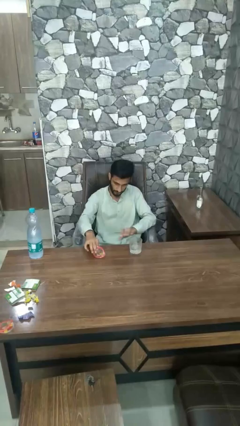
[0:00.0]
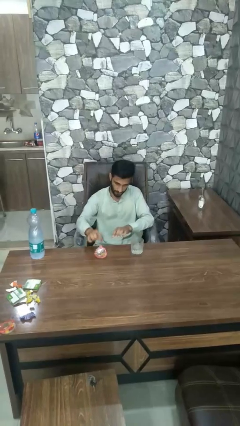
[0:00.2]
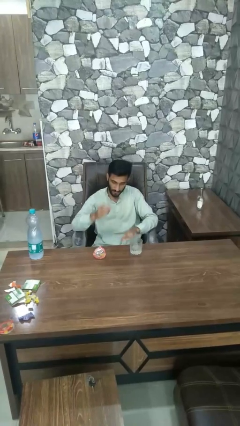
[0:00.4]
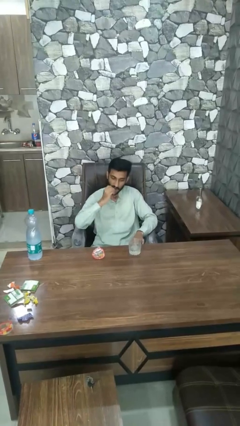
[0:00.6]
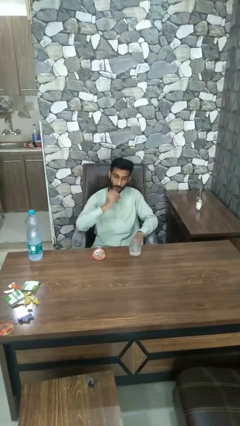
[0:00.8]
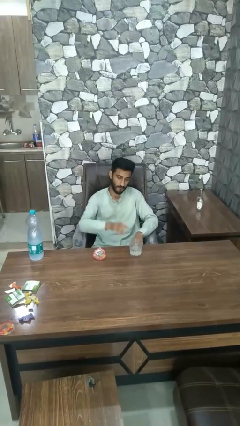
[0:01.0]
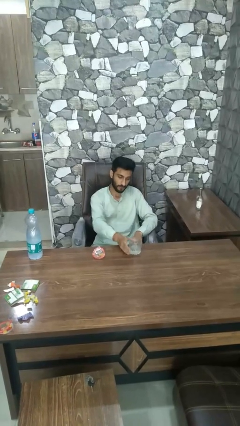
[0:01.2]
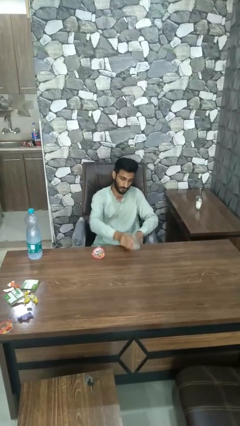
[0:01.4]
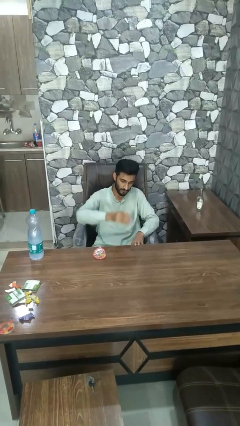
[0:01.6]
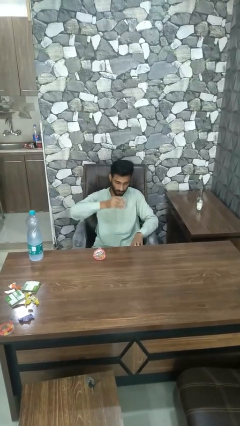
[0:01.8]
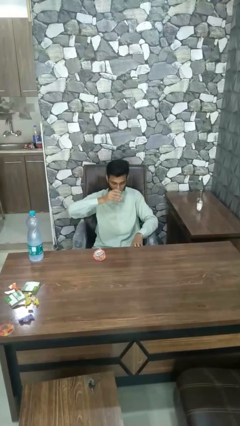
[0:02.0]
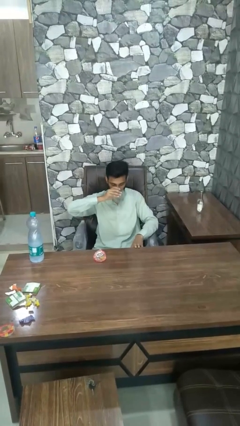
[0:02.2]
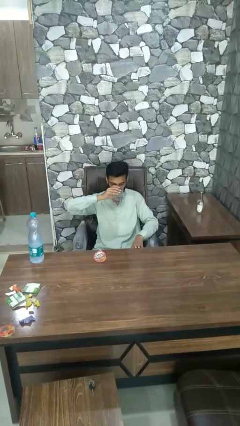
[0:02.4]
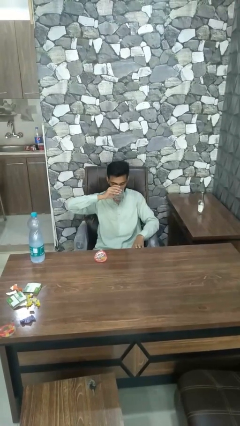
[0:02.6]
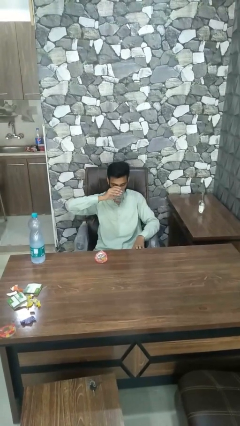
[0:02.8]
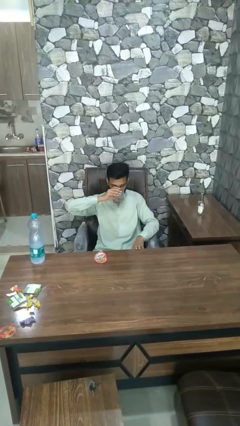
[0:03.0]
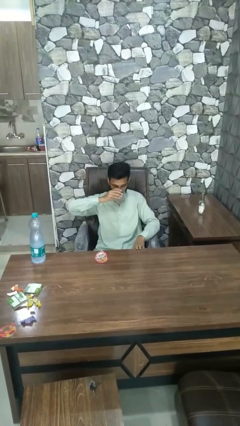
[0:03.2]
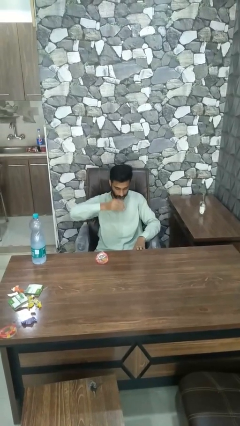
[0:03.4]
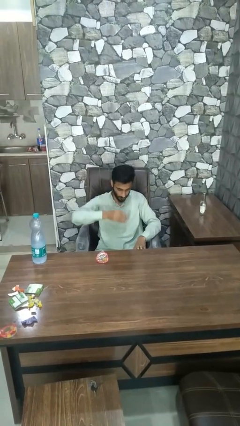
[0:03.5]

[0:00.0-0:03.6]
person drinks from cup

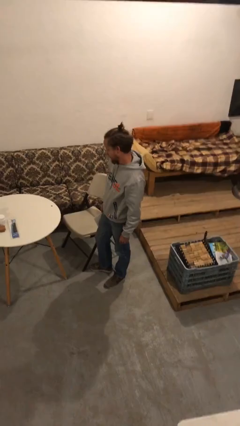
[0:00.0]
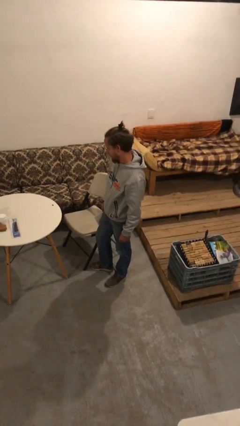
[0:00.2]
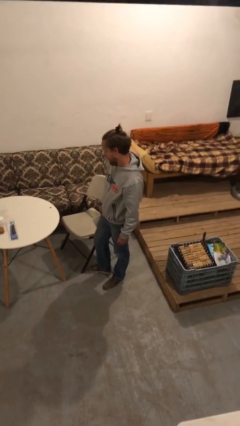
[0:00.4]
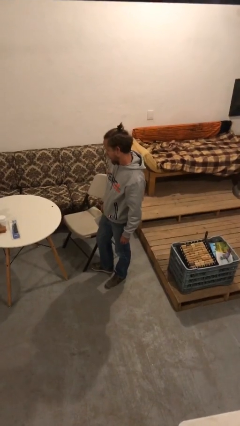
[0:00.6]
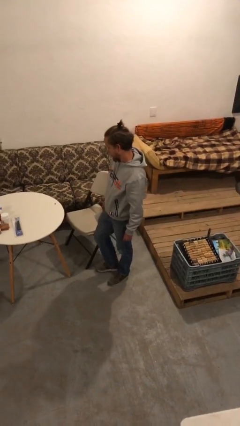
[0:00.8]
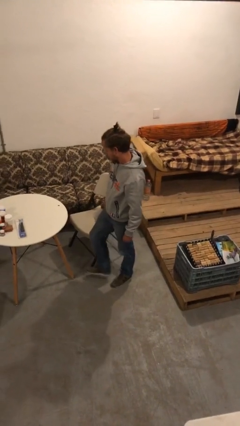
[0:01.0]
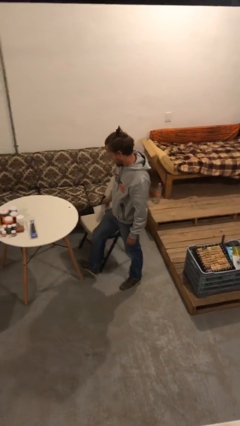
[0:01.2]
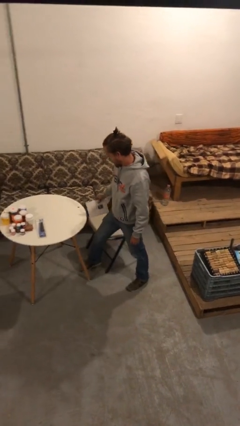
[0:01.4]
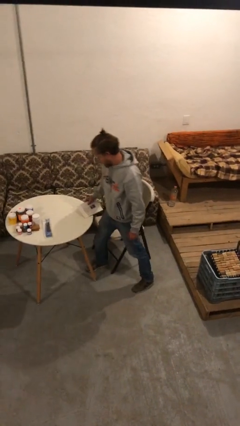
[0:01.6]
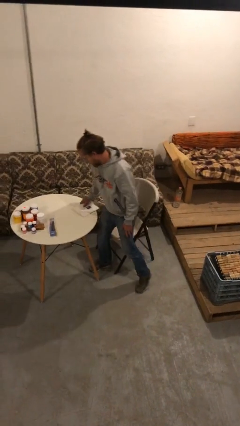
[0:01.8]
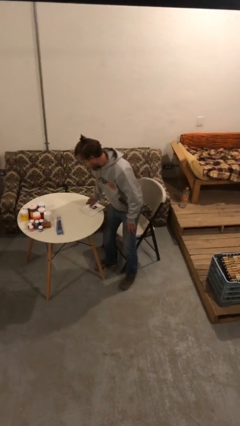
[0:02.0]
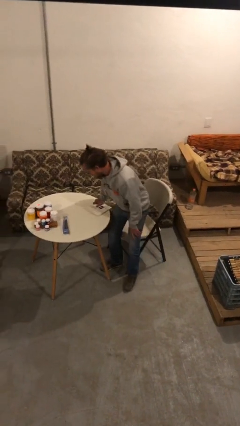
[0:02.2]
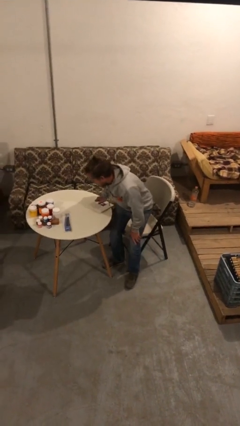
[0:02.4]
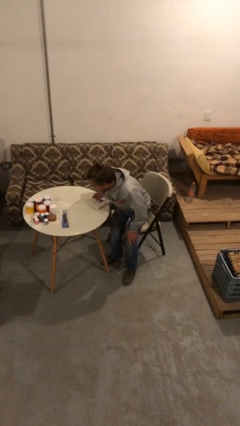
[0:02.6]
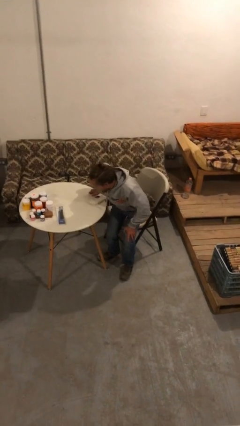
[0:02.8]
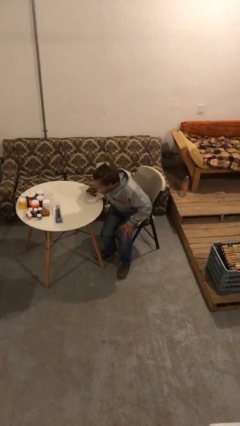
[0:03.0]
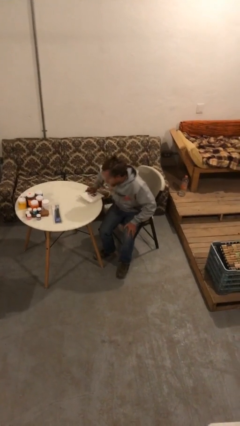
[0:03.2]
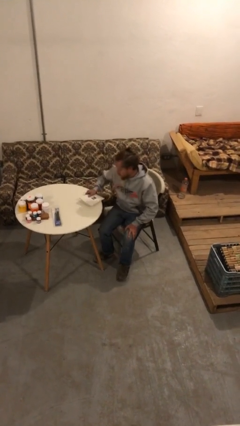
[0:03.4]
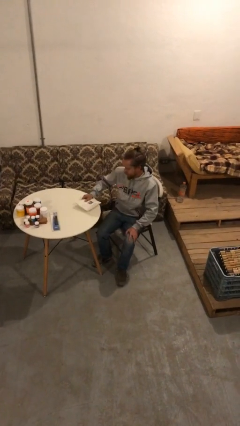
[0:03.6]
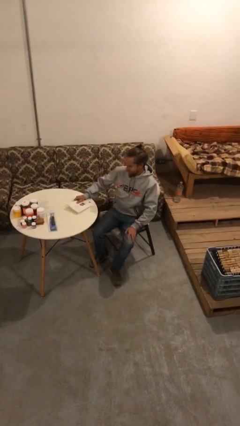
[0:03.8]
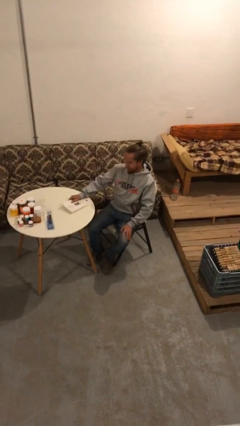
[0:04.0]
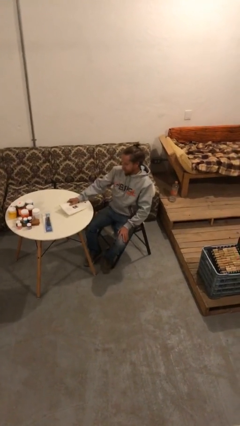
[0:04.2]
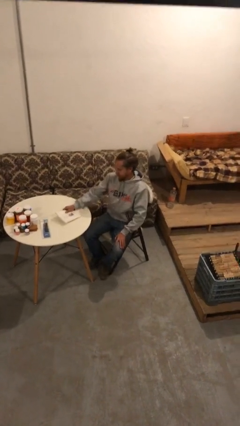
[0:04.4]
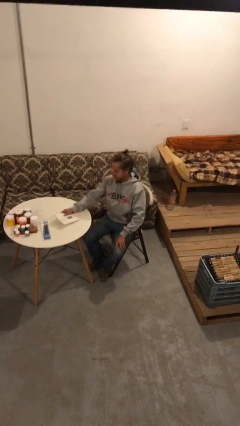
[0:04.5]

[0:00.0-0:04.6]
person sits down

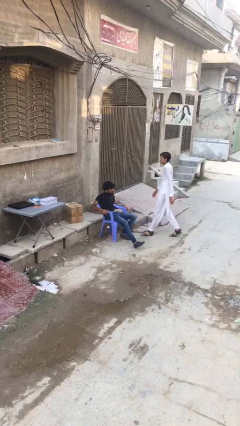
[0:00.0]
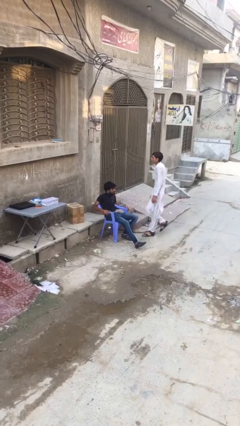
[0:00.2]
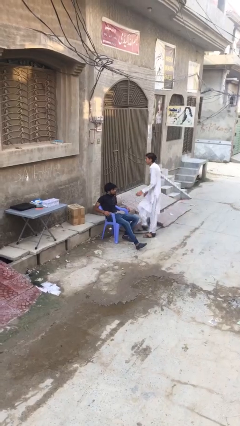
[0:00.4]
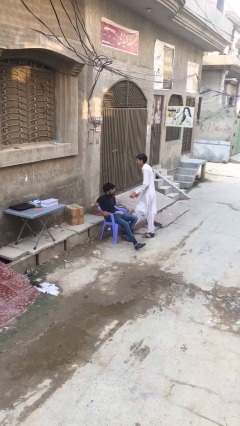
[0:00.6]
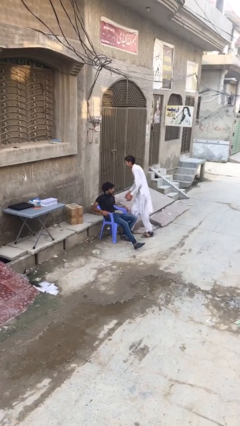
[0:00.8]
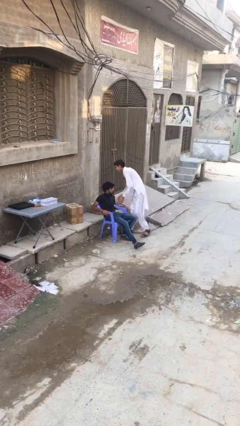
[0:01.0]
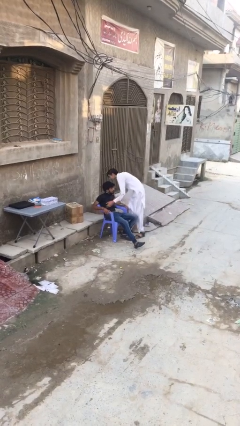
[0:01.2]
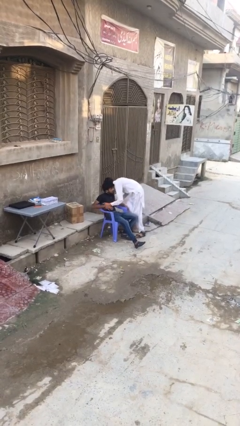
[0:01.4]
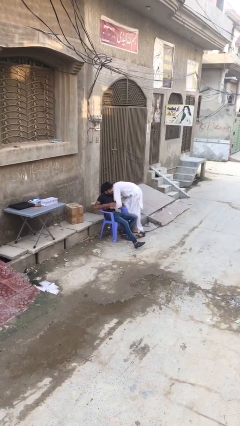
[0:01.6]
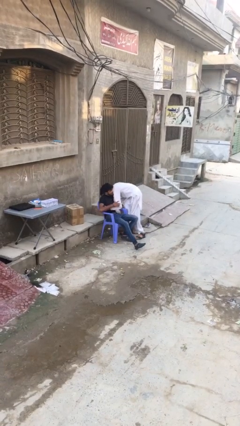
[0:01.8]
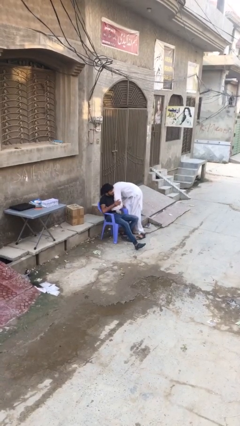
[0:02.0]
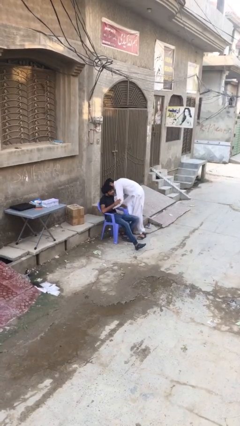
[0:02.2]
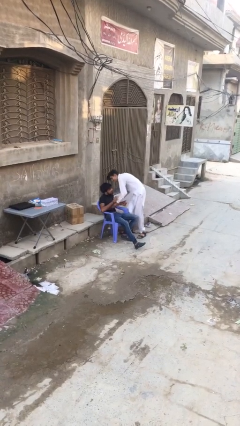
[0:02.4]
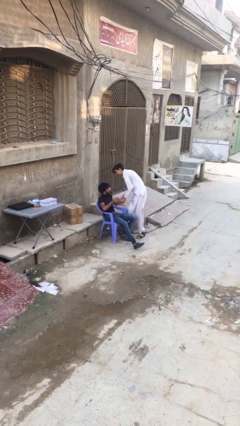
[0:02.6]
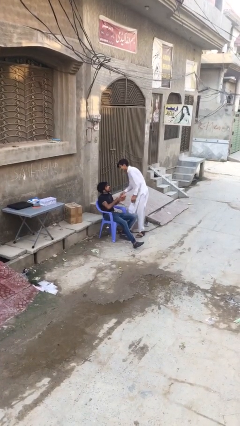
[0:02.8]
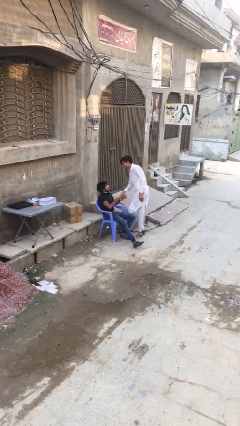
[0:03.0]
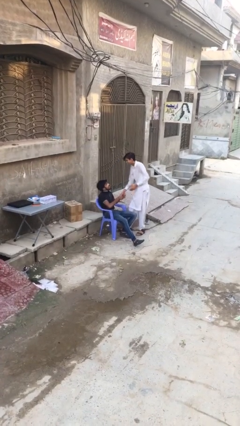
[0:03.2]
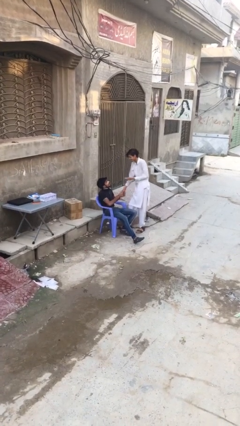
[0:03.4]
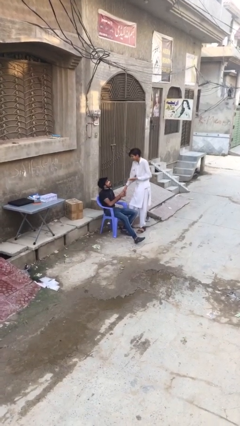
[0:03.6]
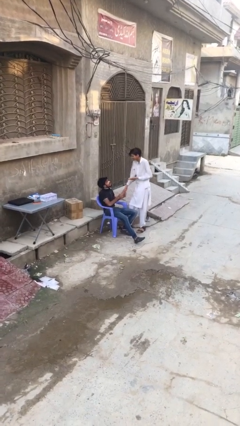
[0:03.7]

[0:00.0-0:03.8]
person embraces person

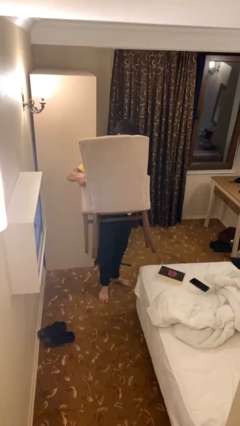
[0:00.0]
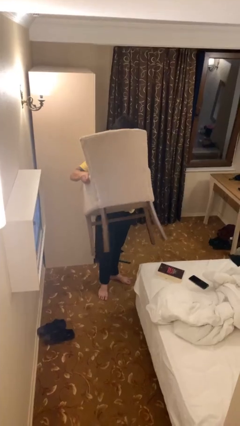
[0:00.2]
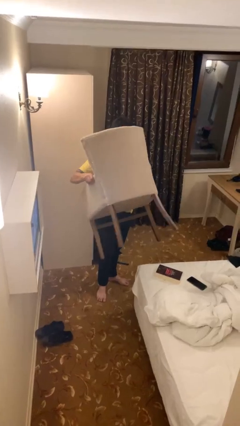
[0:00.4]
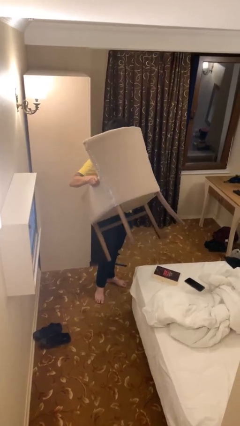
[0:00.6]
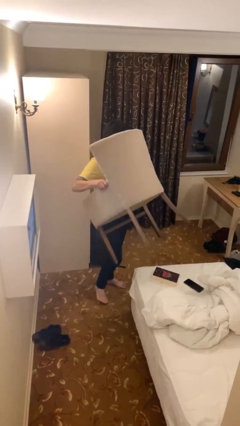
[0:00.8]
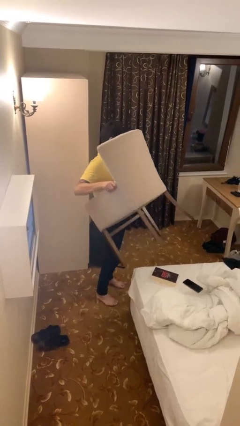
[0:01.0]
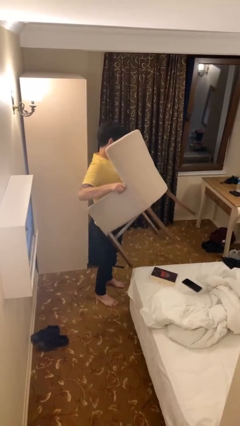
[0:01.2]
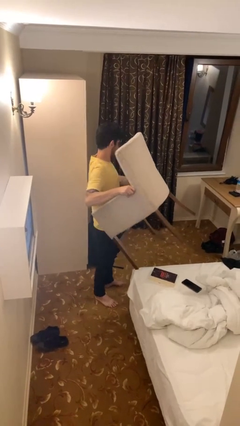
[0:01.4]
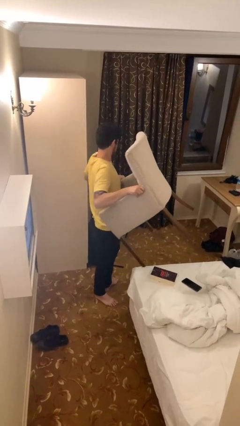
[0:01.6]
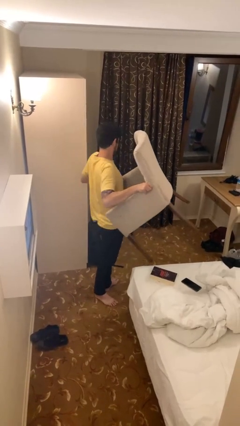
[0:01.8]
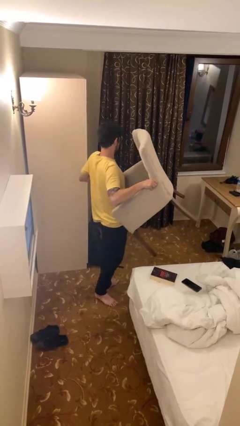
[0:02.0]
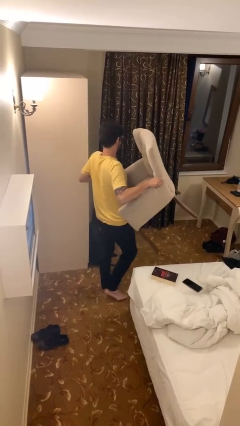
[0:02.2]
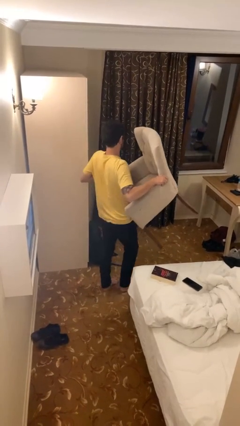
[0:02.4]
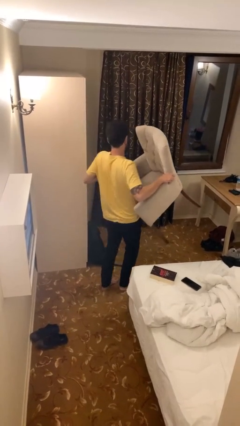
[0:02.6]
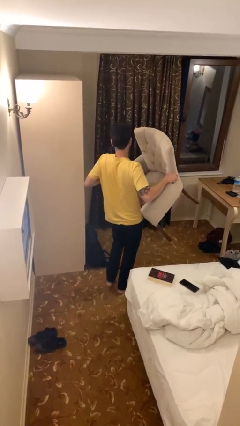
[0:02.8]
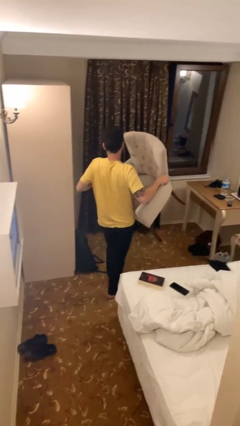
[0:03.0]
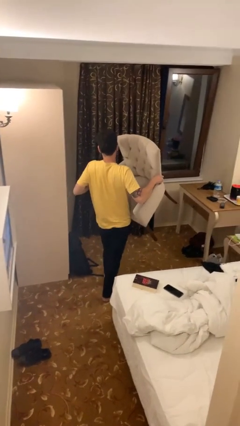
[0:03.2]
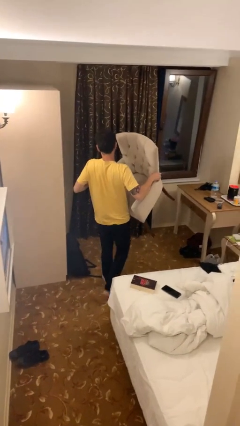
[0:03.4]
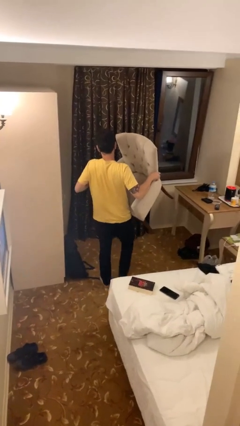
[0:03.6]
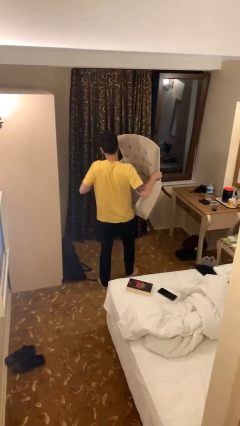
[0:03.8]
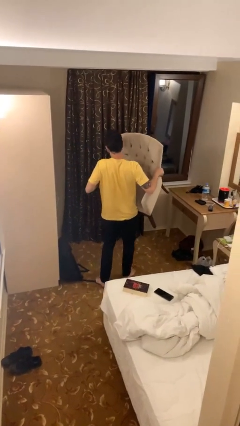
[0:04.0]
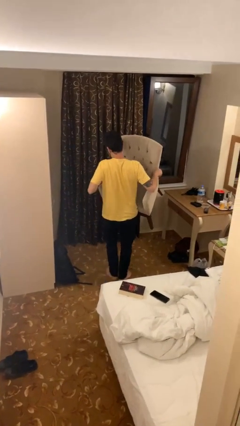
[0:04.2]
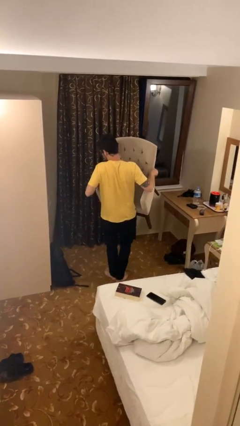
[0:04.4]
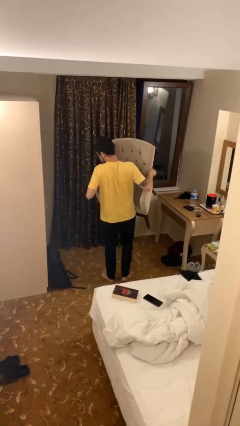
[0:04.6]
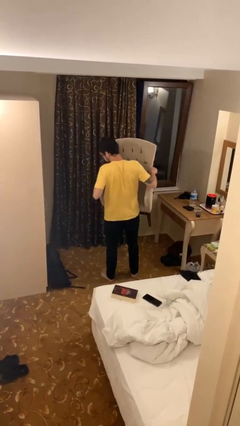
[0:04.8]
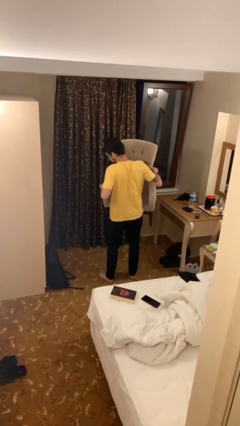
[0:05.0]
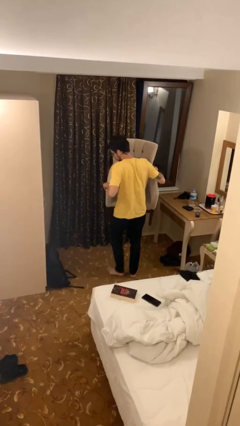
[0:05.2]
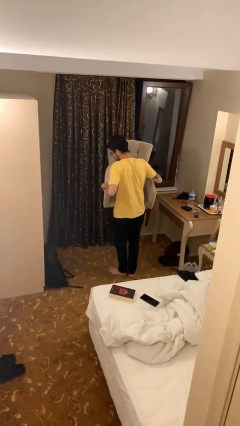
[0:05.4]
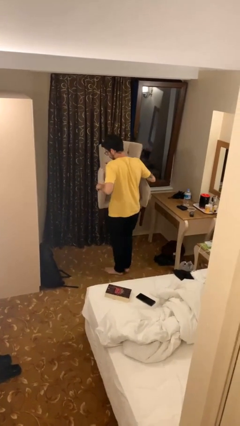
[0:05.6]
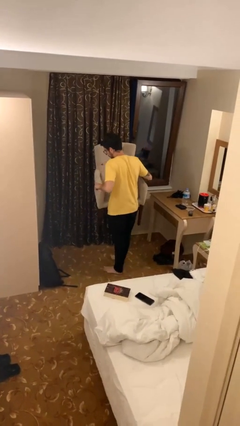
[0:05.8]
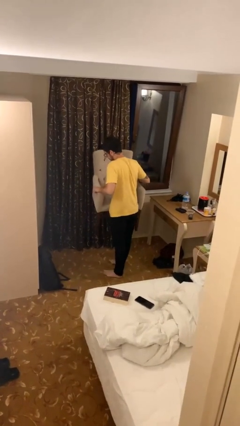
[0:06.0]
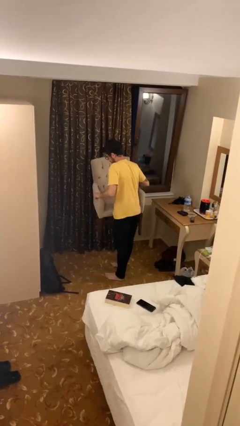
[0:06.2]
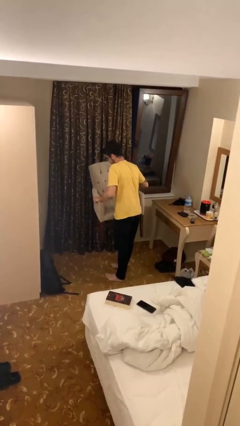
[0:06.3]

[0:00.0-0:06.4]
person carries heavy object
